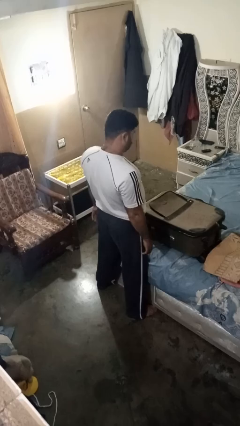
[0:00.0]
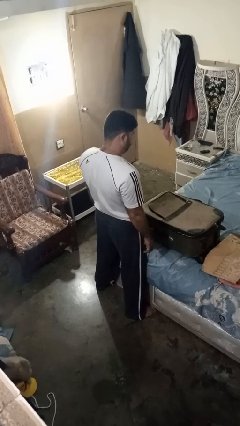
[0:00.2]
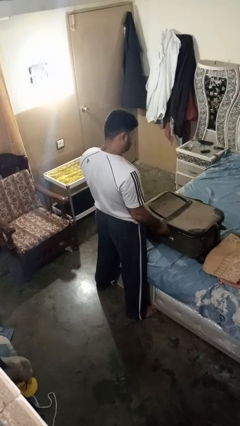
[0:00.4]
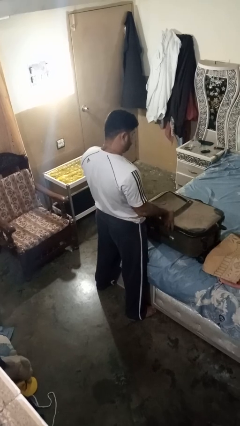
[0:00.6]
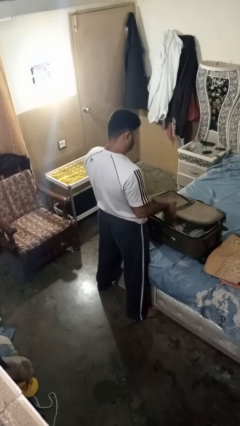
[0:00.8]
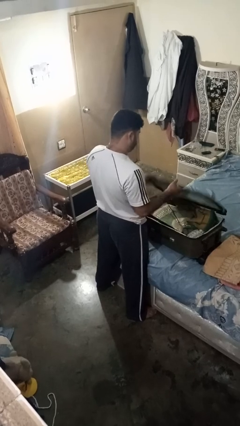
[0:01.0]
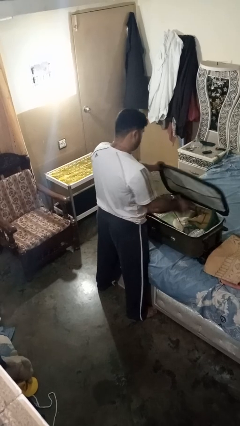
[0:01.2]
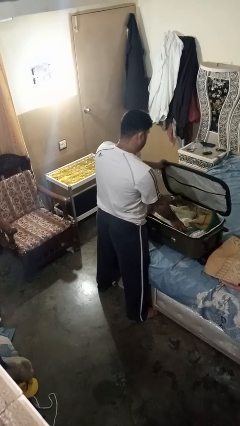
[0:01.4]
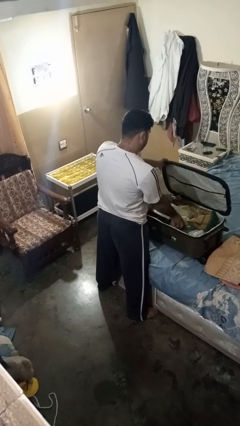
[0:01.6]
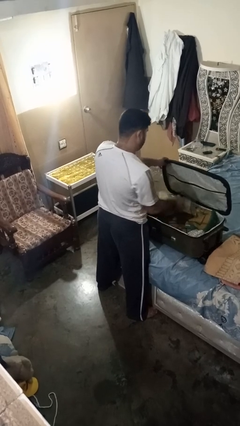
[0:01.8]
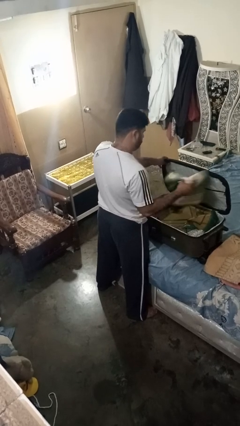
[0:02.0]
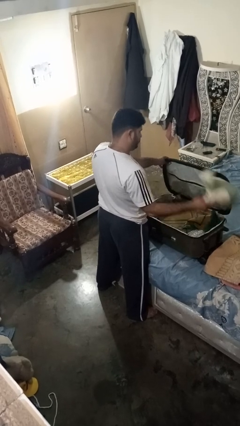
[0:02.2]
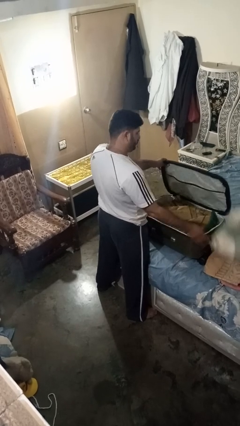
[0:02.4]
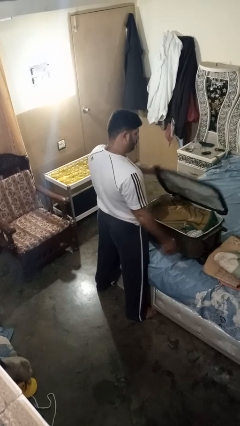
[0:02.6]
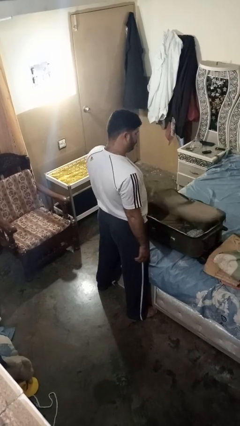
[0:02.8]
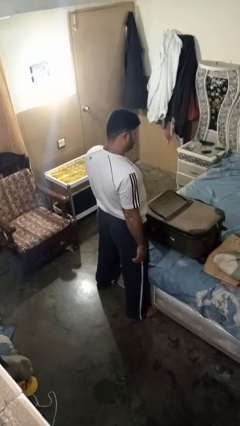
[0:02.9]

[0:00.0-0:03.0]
person unloads clothes from suitcase

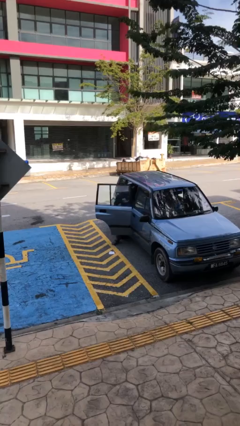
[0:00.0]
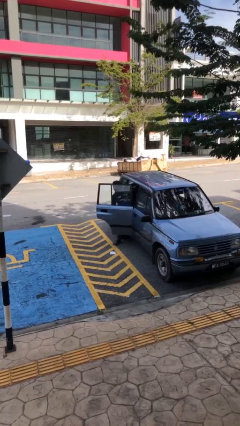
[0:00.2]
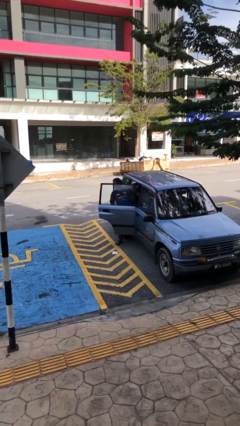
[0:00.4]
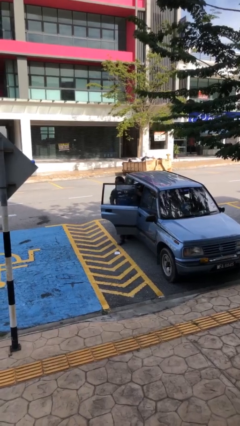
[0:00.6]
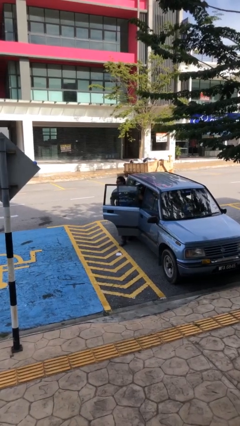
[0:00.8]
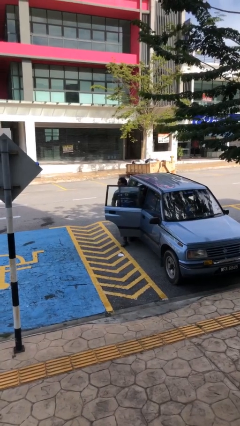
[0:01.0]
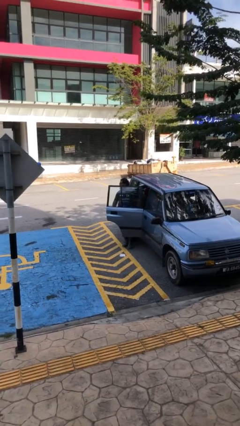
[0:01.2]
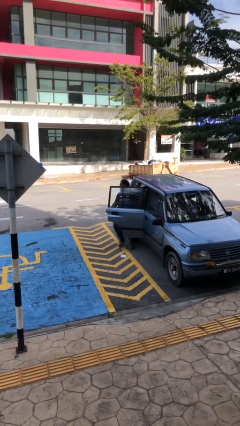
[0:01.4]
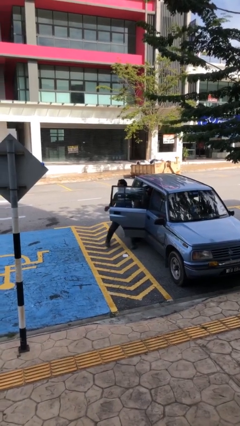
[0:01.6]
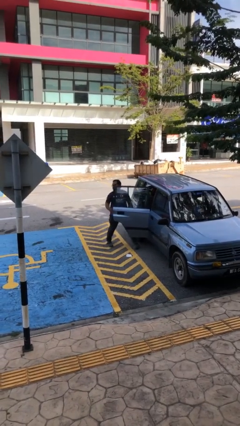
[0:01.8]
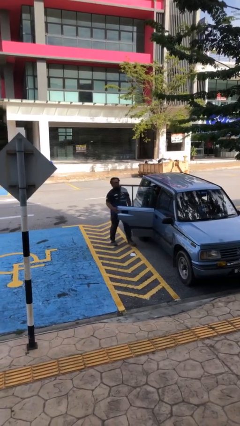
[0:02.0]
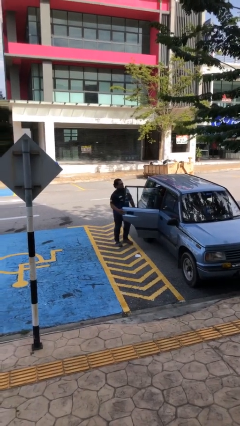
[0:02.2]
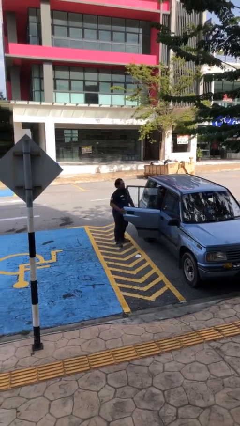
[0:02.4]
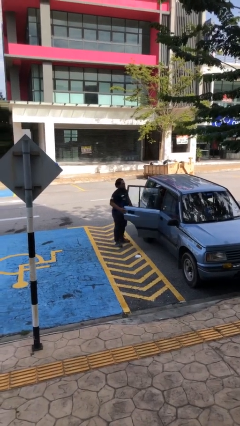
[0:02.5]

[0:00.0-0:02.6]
person exits car

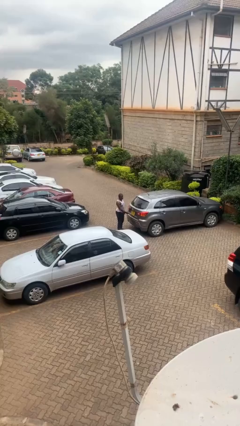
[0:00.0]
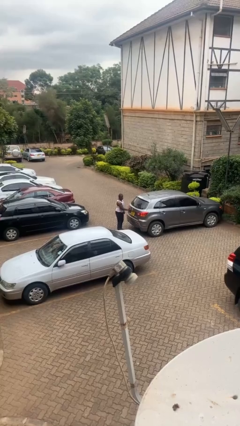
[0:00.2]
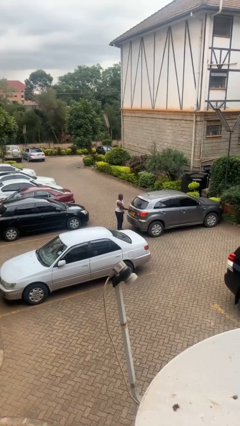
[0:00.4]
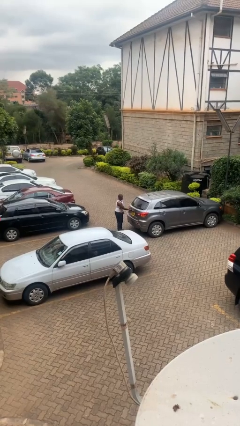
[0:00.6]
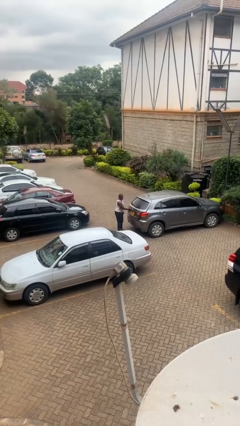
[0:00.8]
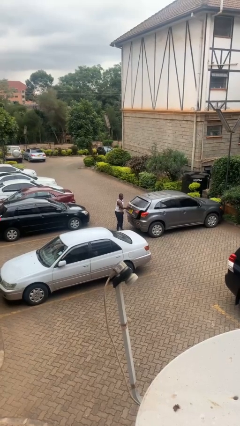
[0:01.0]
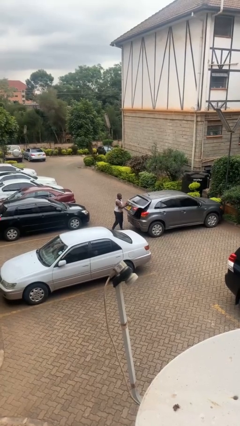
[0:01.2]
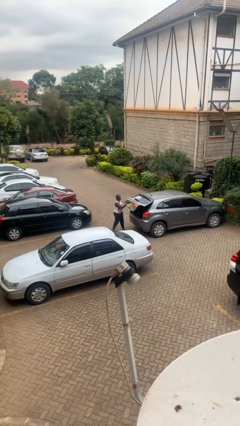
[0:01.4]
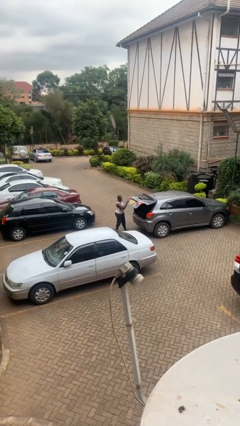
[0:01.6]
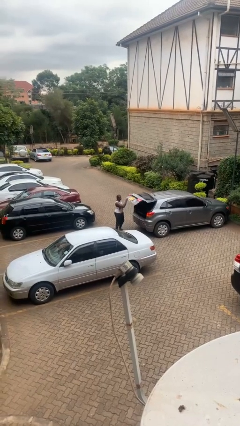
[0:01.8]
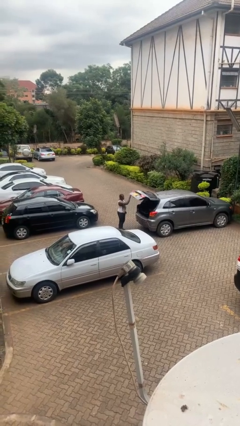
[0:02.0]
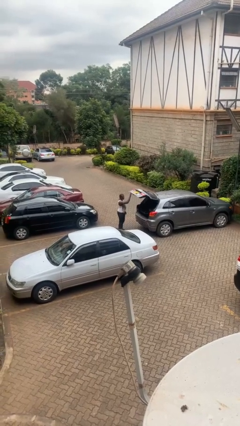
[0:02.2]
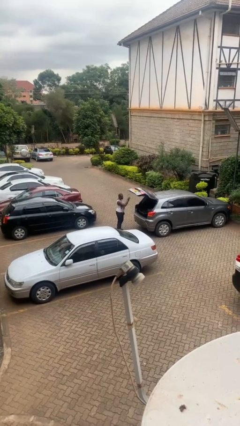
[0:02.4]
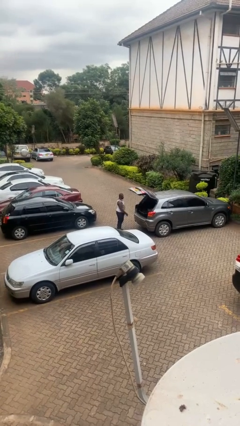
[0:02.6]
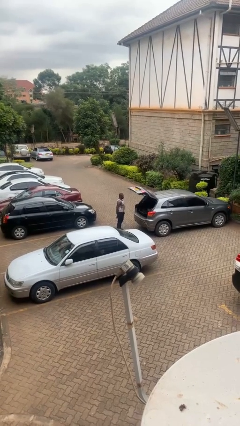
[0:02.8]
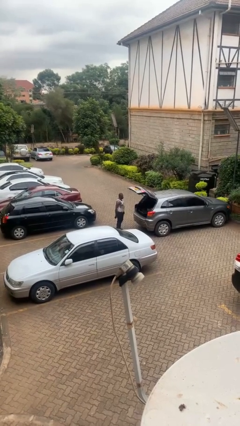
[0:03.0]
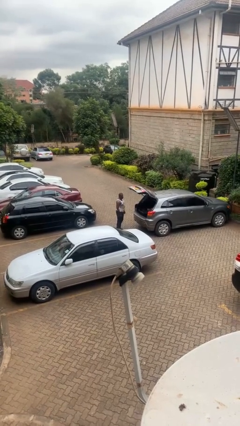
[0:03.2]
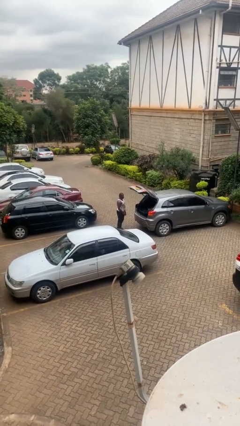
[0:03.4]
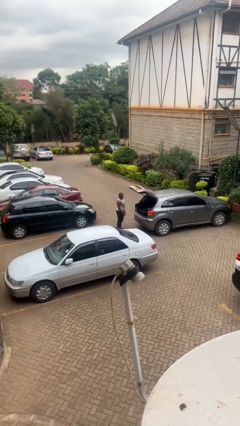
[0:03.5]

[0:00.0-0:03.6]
person opens car trunk

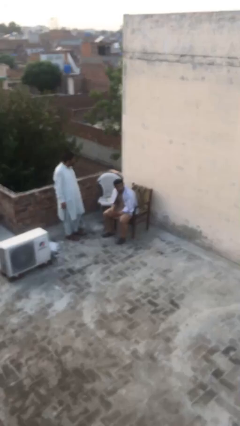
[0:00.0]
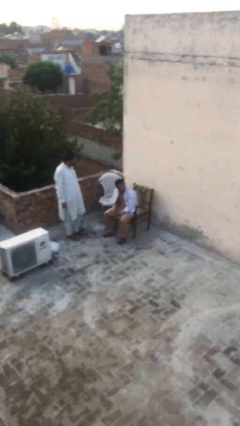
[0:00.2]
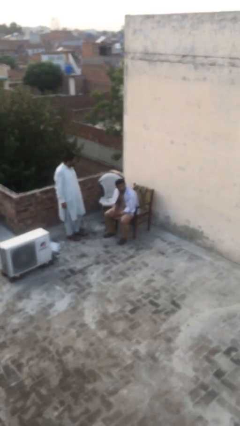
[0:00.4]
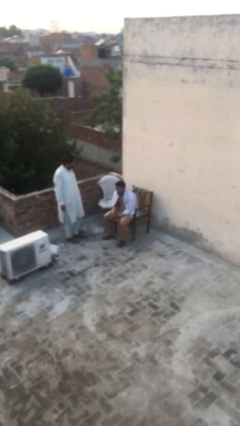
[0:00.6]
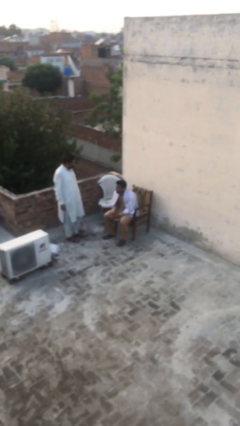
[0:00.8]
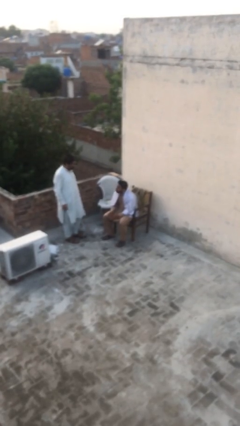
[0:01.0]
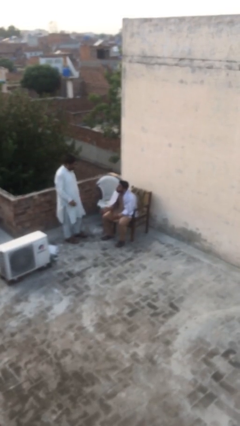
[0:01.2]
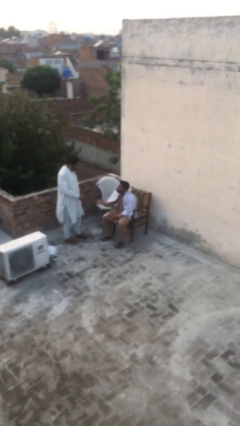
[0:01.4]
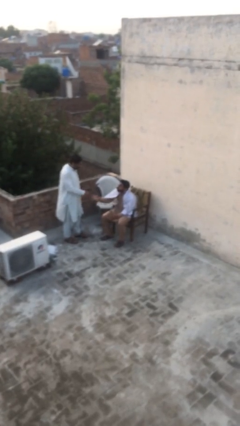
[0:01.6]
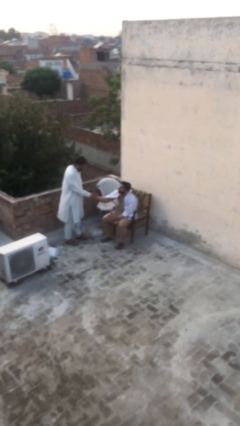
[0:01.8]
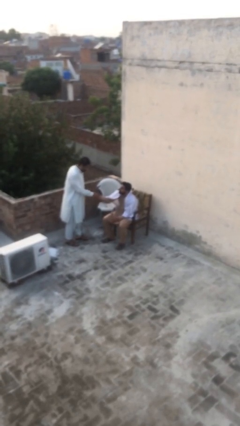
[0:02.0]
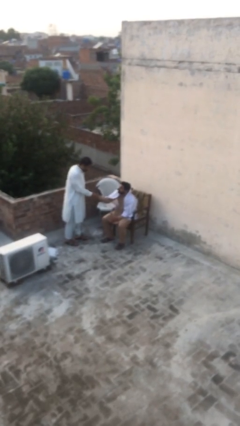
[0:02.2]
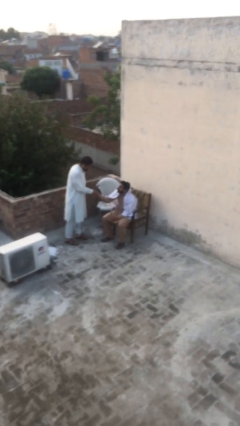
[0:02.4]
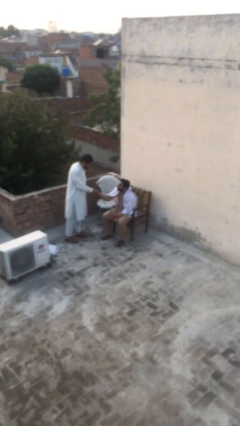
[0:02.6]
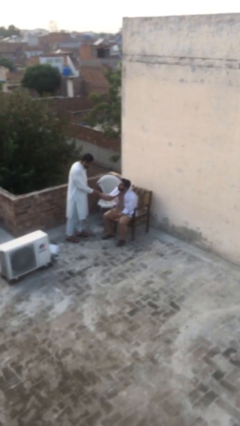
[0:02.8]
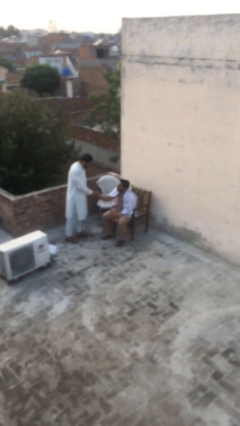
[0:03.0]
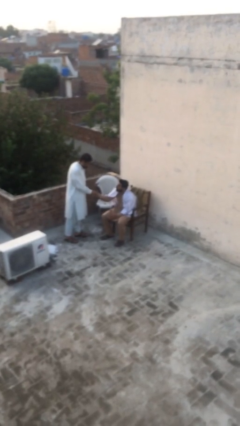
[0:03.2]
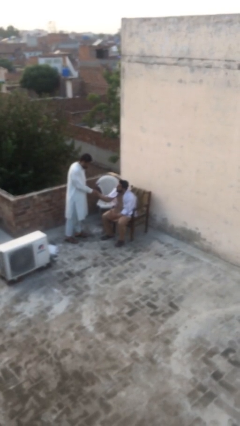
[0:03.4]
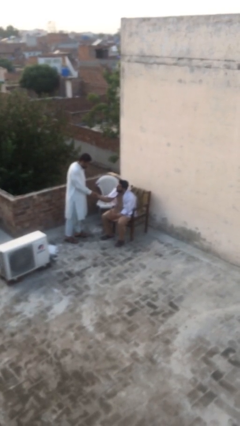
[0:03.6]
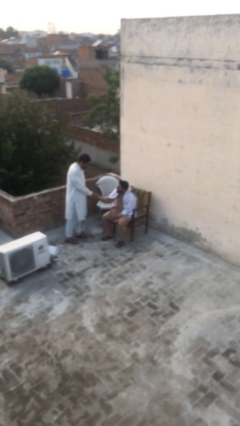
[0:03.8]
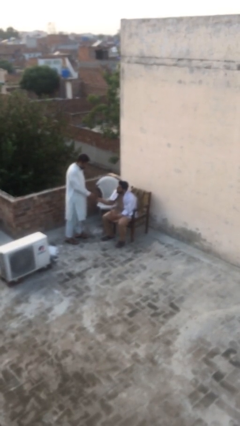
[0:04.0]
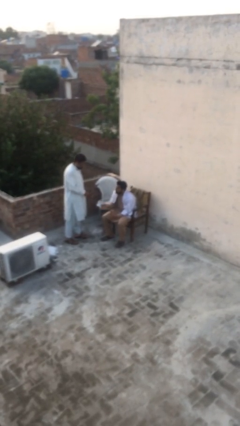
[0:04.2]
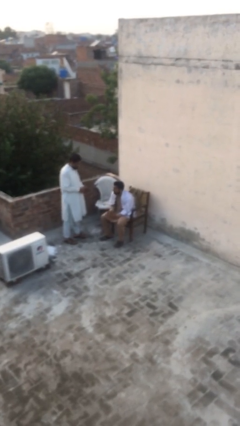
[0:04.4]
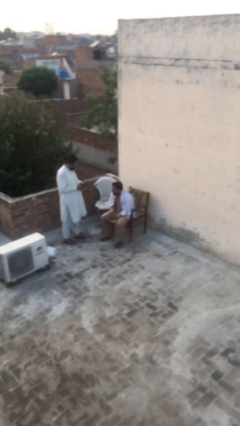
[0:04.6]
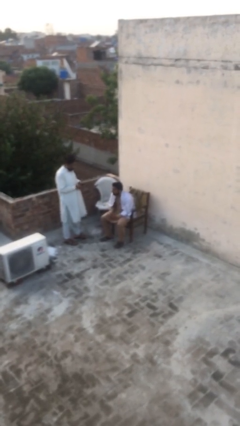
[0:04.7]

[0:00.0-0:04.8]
person shakes hand

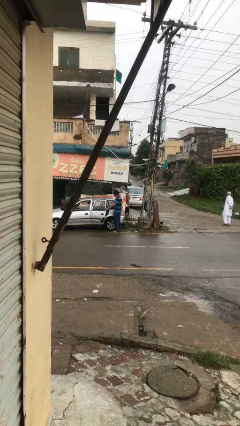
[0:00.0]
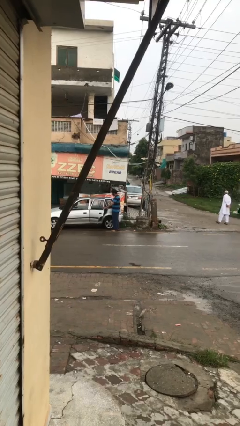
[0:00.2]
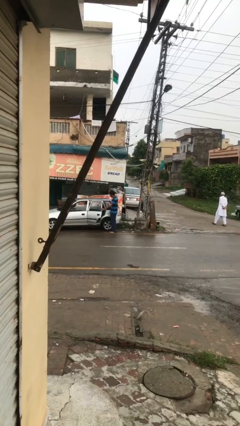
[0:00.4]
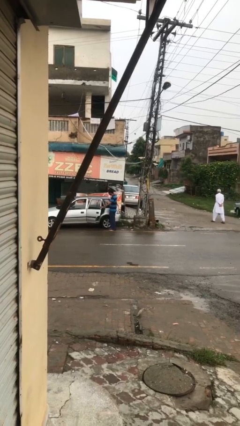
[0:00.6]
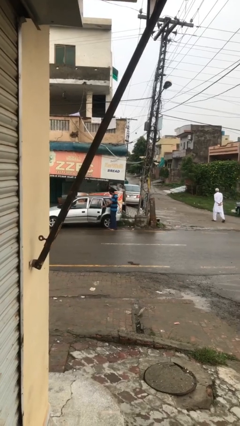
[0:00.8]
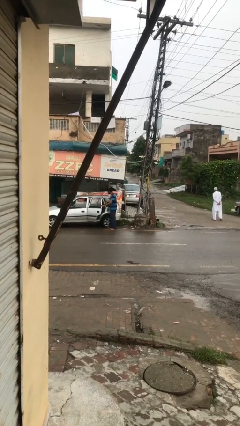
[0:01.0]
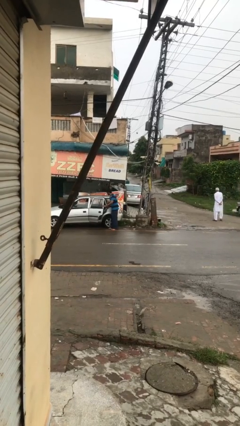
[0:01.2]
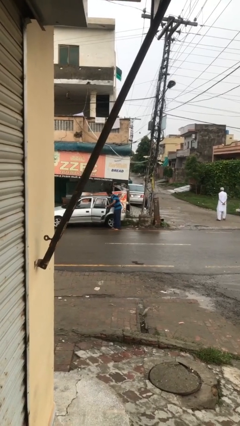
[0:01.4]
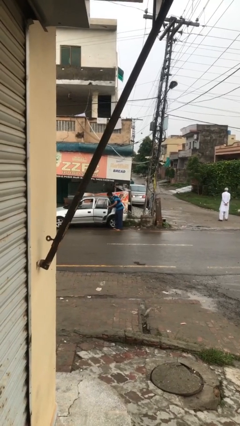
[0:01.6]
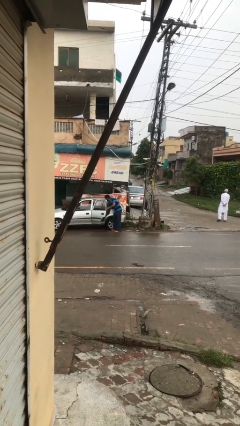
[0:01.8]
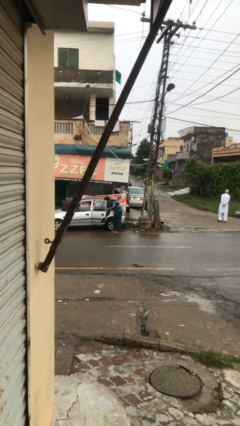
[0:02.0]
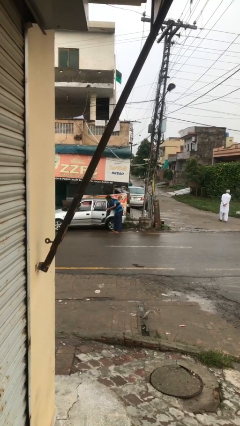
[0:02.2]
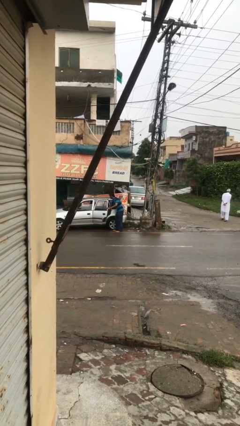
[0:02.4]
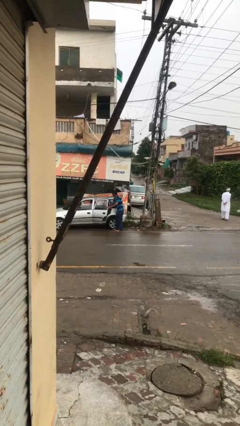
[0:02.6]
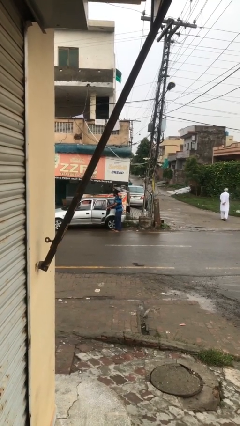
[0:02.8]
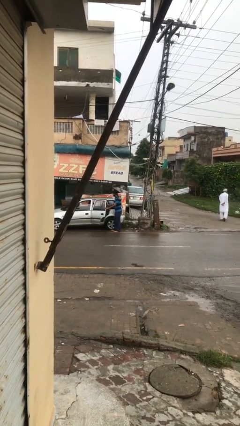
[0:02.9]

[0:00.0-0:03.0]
person unloads car

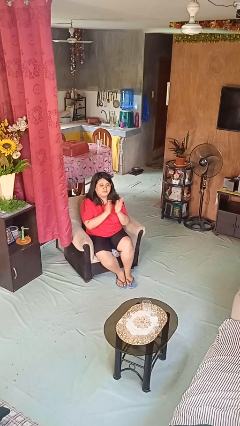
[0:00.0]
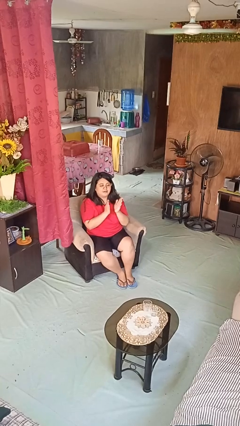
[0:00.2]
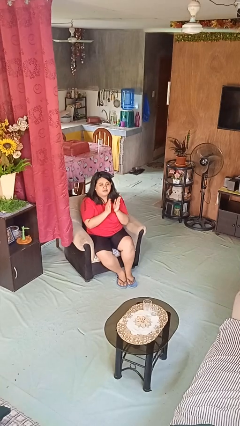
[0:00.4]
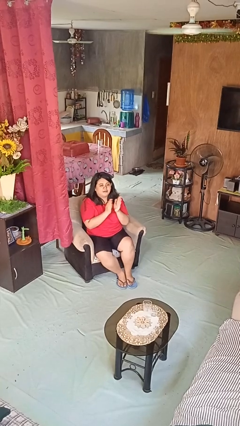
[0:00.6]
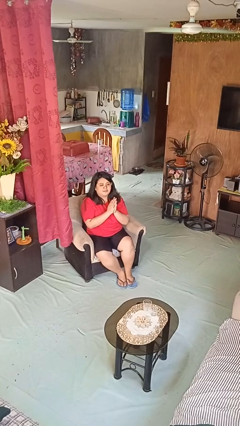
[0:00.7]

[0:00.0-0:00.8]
person claps hands
